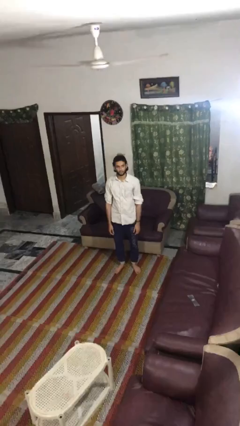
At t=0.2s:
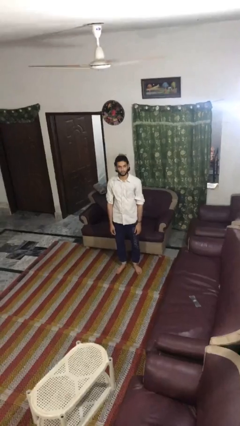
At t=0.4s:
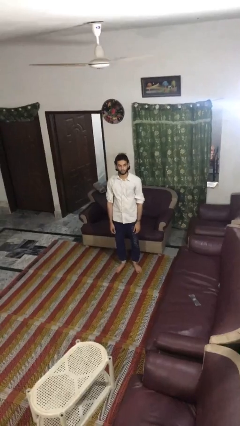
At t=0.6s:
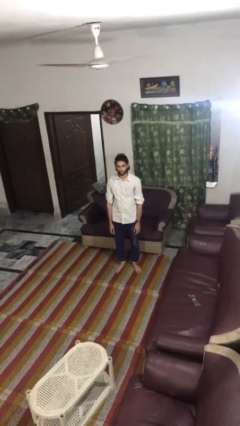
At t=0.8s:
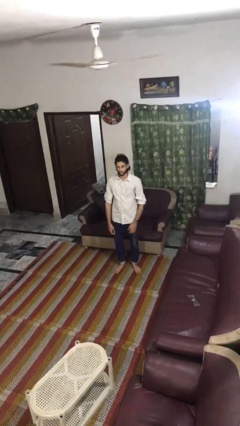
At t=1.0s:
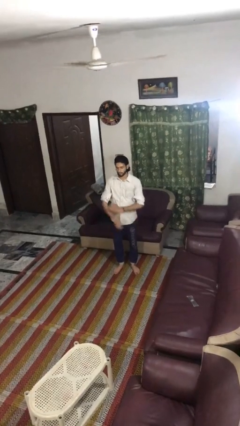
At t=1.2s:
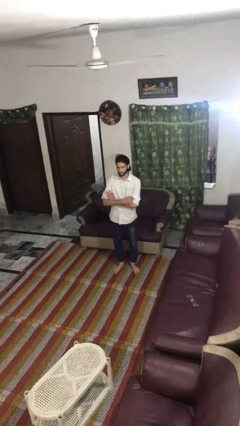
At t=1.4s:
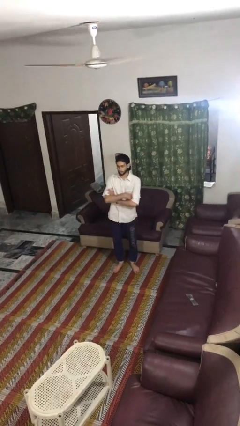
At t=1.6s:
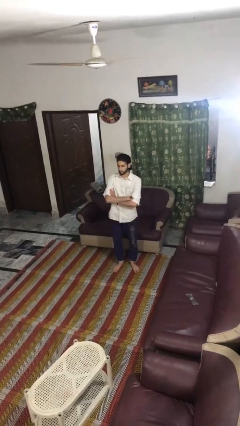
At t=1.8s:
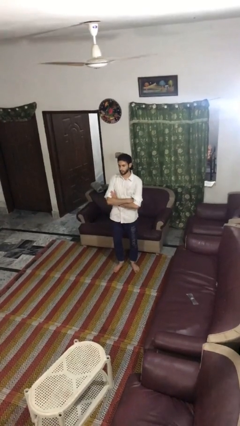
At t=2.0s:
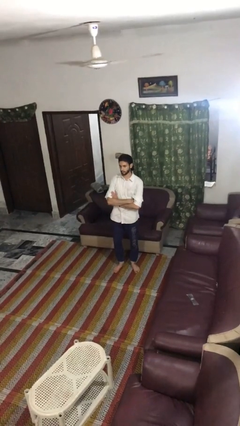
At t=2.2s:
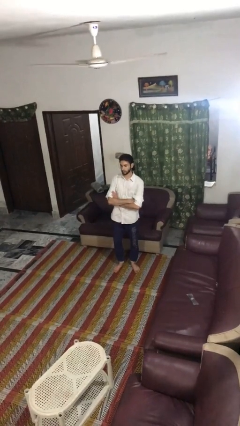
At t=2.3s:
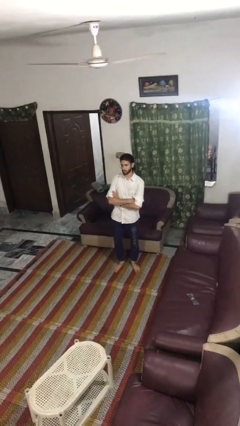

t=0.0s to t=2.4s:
person crosses arms

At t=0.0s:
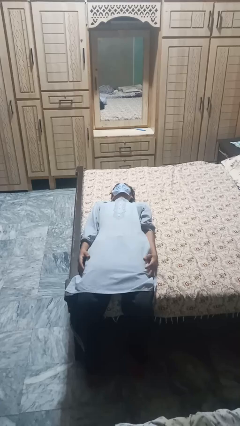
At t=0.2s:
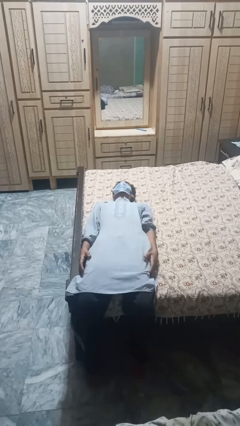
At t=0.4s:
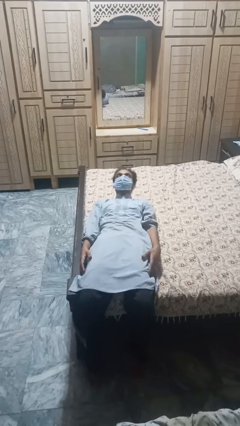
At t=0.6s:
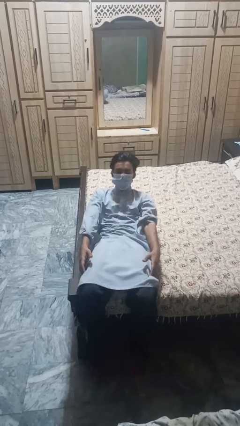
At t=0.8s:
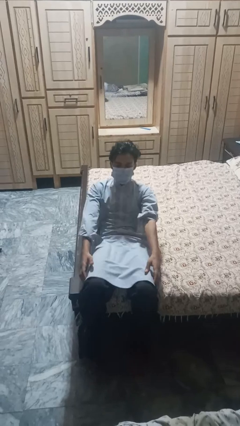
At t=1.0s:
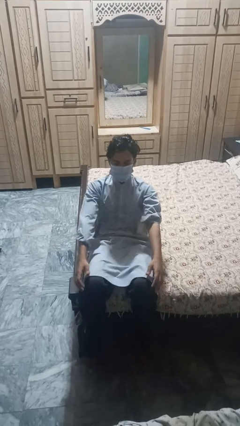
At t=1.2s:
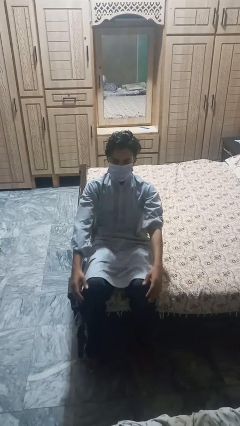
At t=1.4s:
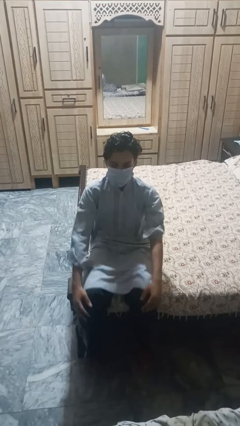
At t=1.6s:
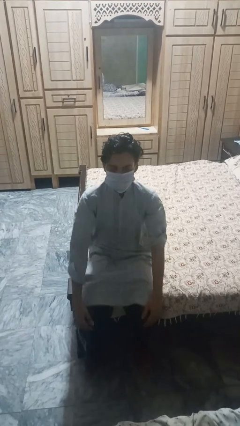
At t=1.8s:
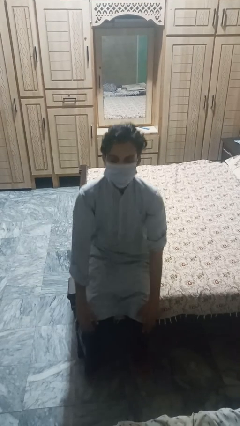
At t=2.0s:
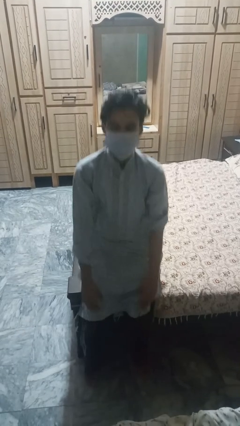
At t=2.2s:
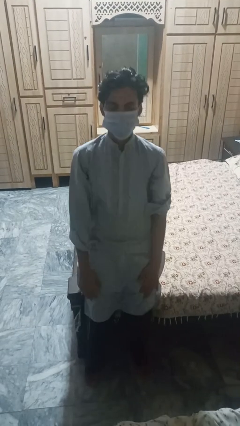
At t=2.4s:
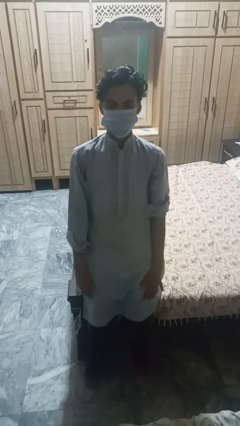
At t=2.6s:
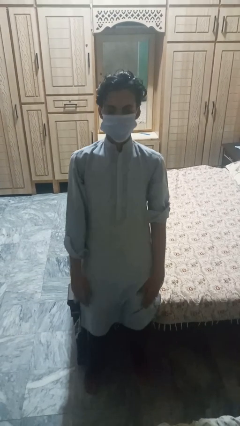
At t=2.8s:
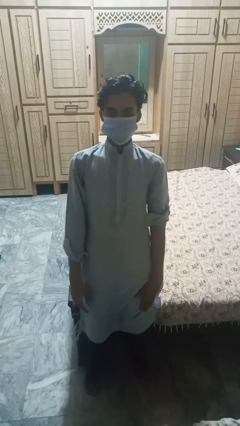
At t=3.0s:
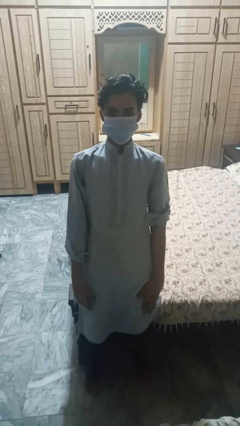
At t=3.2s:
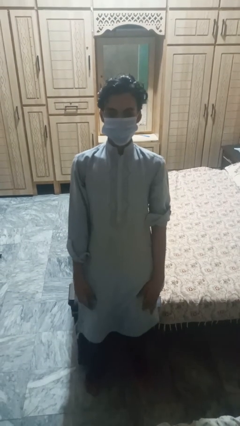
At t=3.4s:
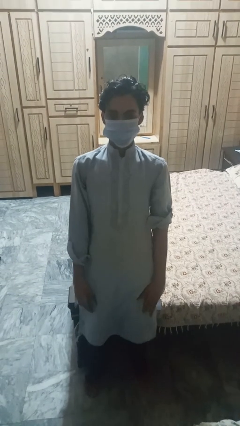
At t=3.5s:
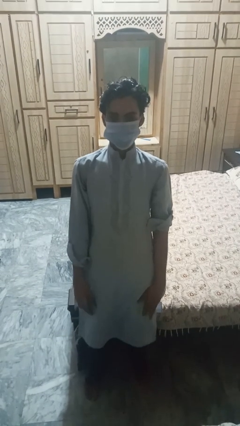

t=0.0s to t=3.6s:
person stands up

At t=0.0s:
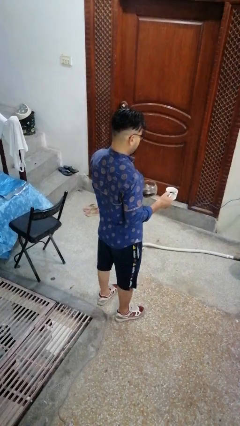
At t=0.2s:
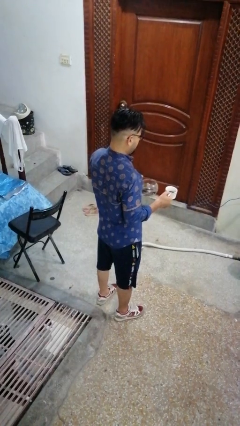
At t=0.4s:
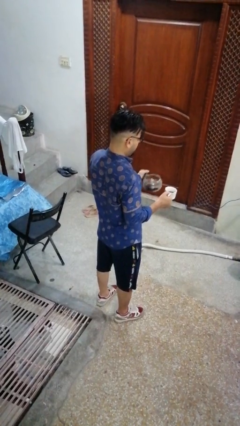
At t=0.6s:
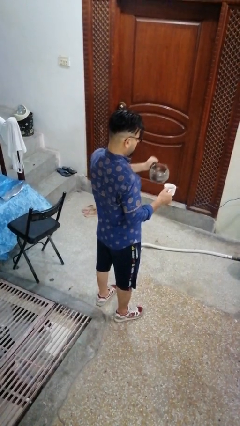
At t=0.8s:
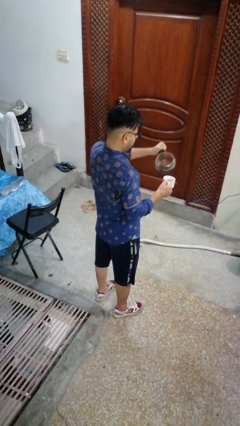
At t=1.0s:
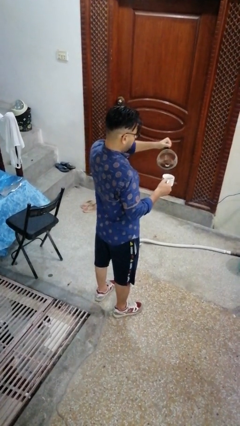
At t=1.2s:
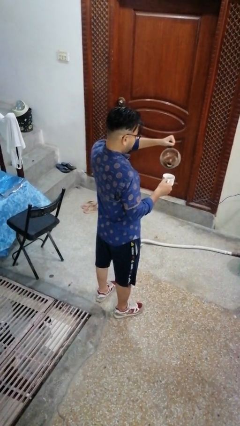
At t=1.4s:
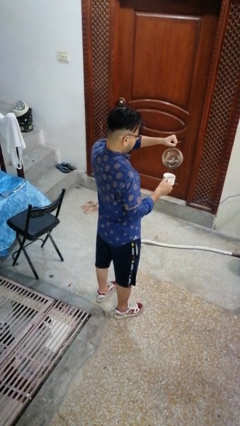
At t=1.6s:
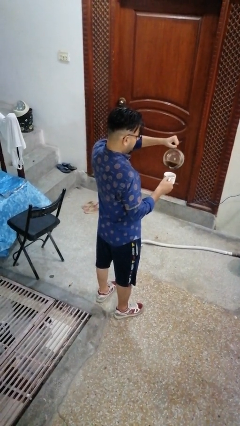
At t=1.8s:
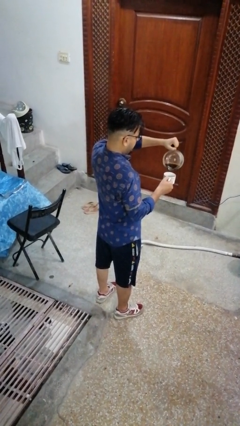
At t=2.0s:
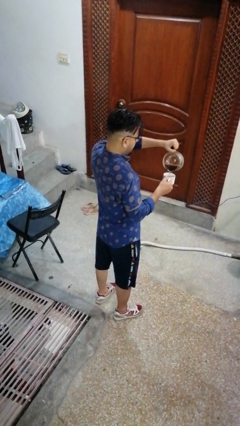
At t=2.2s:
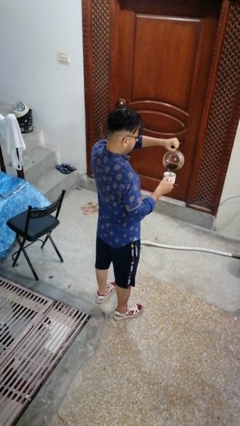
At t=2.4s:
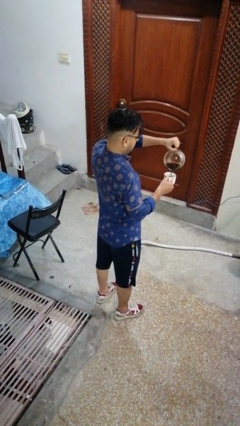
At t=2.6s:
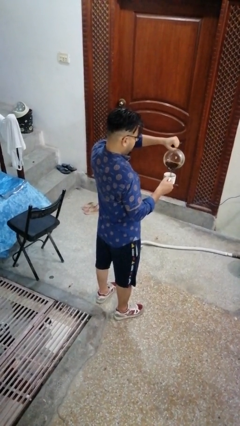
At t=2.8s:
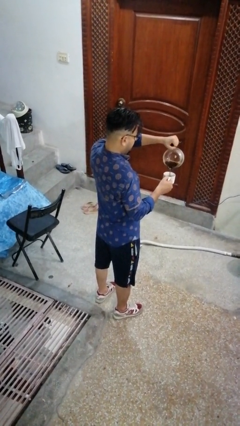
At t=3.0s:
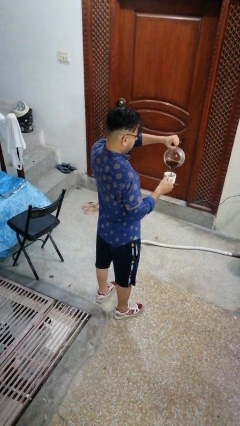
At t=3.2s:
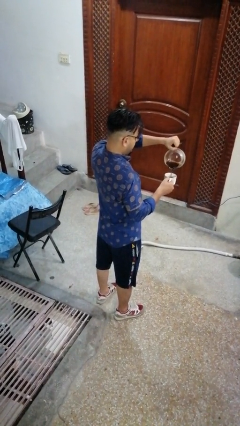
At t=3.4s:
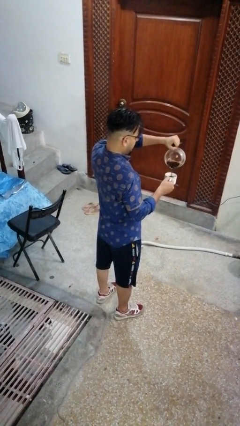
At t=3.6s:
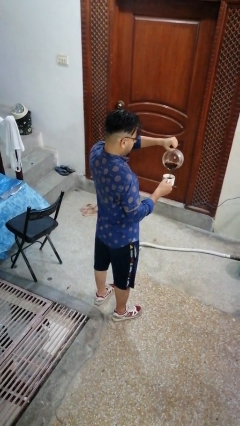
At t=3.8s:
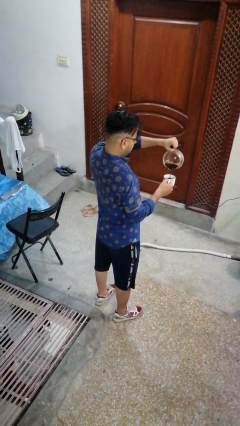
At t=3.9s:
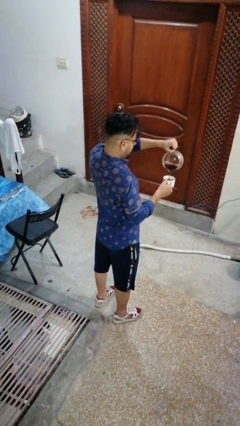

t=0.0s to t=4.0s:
person pours coffee into mug

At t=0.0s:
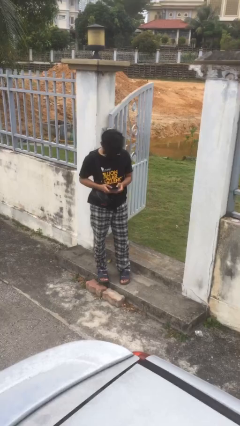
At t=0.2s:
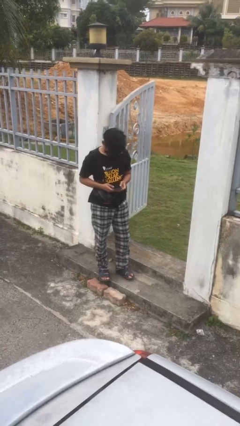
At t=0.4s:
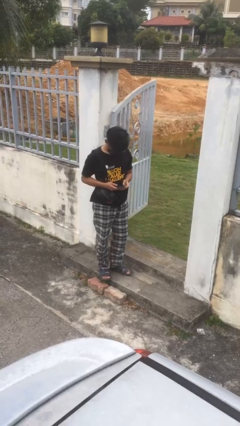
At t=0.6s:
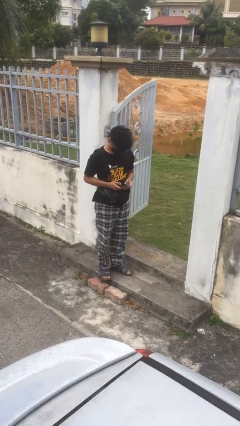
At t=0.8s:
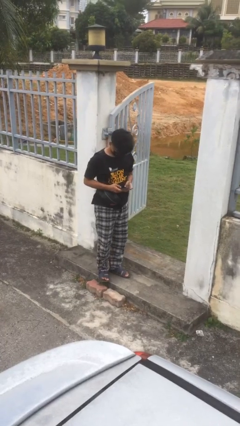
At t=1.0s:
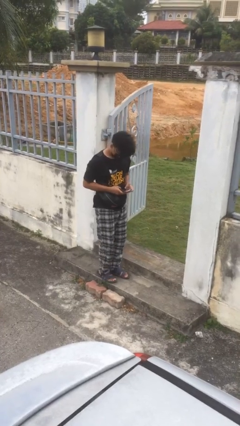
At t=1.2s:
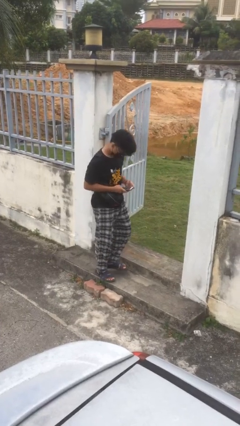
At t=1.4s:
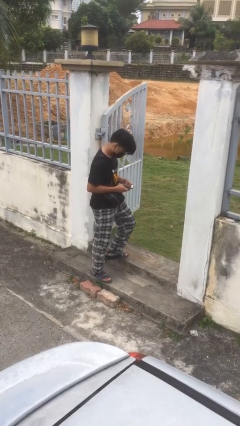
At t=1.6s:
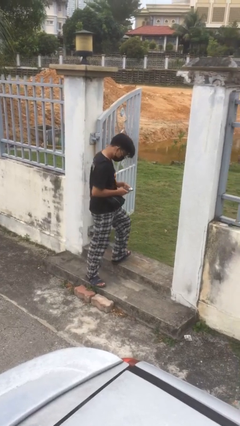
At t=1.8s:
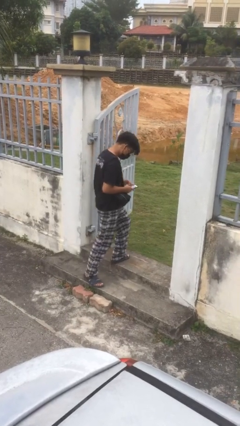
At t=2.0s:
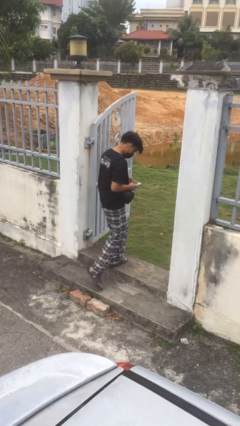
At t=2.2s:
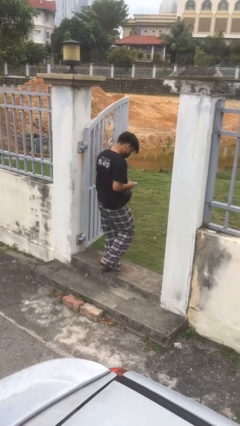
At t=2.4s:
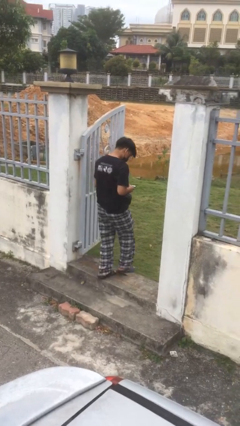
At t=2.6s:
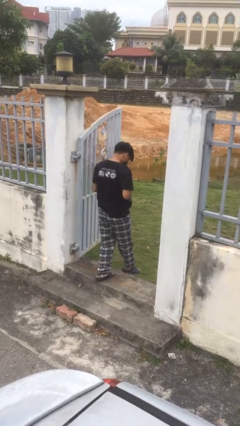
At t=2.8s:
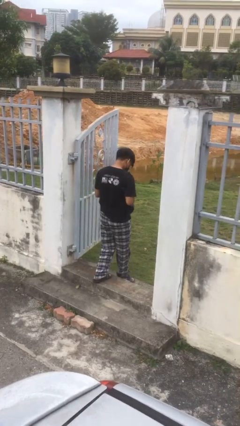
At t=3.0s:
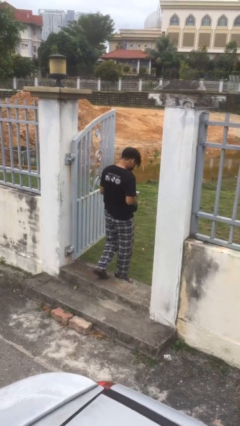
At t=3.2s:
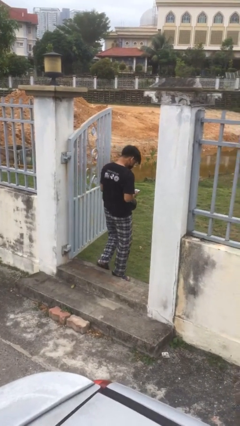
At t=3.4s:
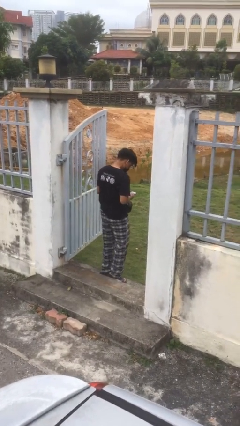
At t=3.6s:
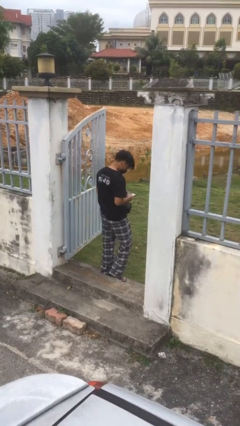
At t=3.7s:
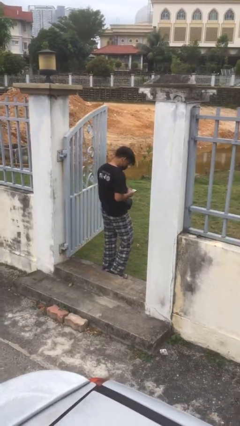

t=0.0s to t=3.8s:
person exits scene through structure

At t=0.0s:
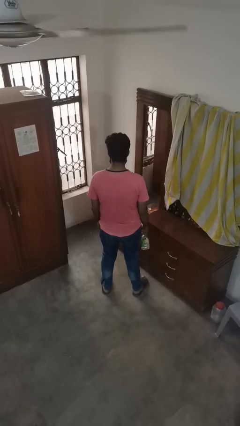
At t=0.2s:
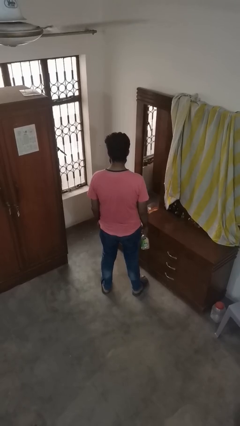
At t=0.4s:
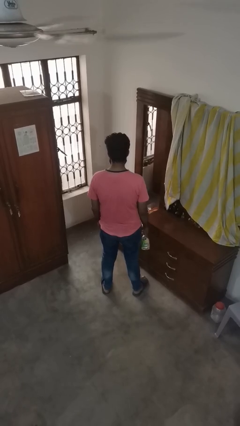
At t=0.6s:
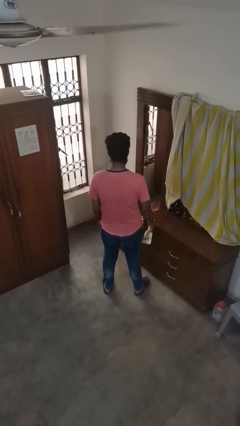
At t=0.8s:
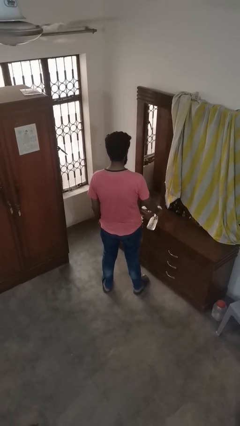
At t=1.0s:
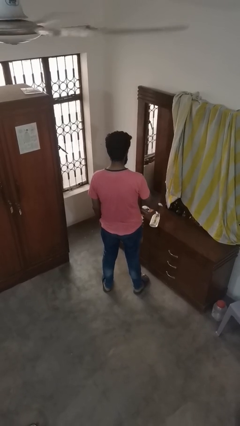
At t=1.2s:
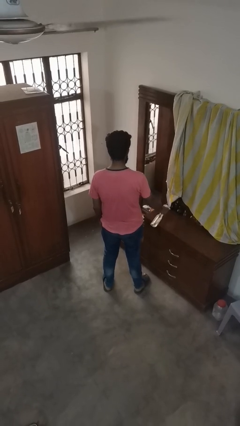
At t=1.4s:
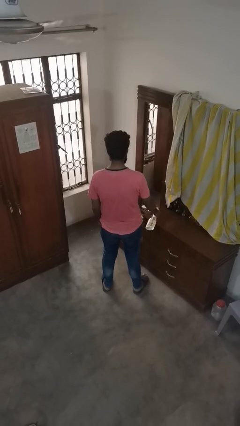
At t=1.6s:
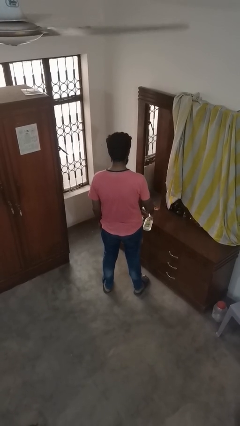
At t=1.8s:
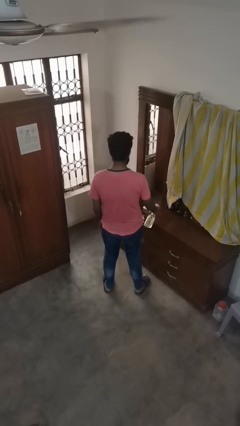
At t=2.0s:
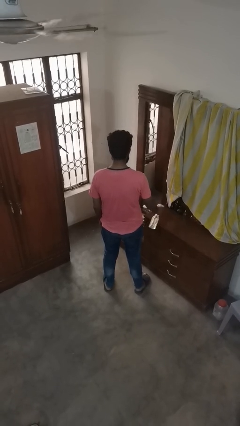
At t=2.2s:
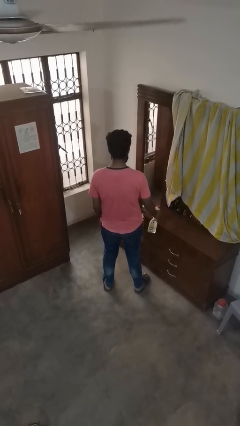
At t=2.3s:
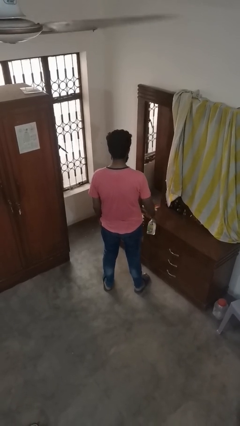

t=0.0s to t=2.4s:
person sprays from bottle

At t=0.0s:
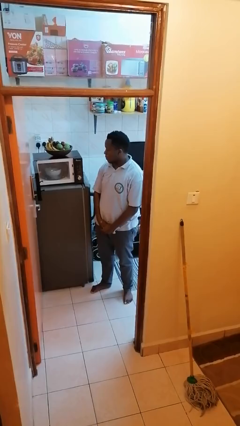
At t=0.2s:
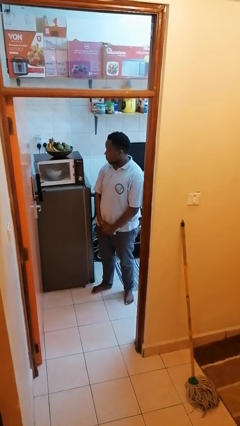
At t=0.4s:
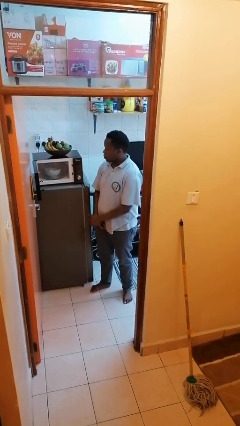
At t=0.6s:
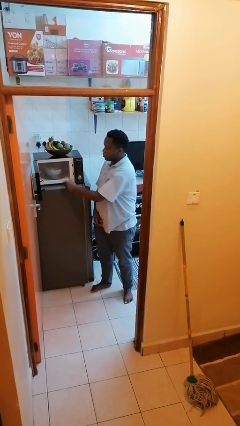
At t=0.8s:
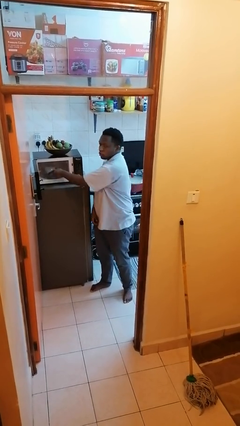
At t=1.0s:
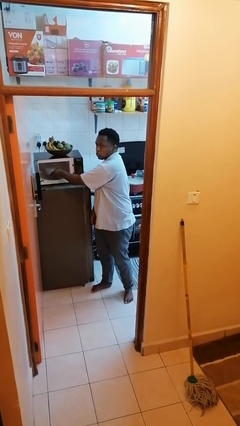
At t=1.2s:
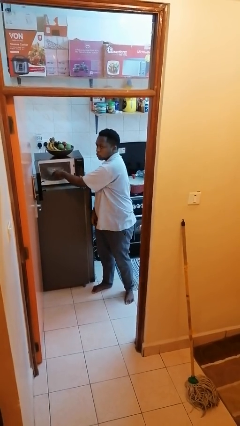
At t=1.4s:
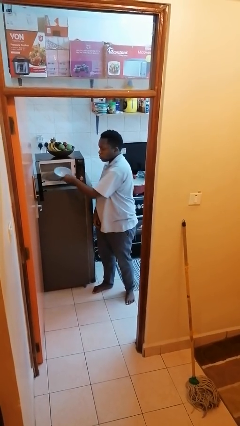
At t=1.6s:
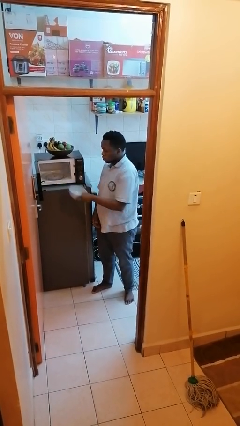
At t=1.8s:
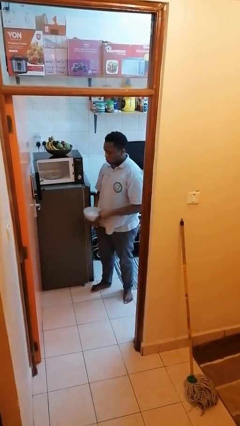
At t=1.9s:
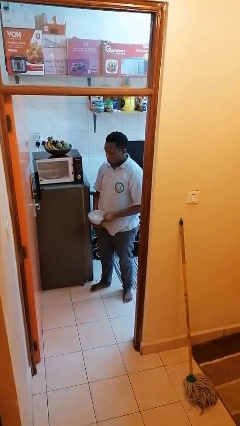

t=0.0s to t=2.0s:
person takes object from microwave
